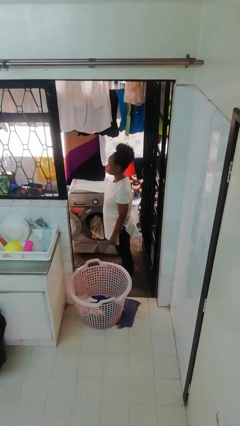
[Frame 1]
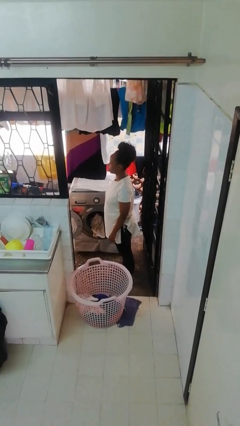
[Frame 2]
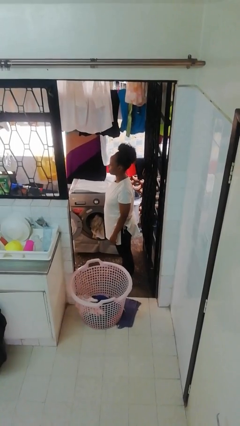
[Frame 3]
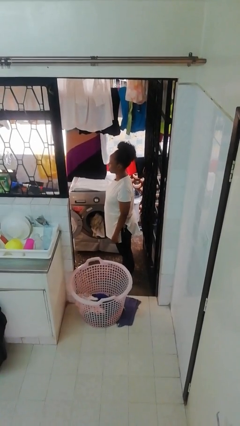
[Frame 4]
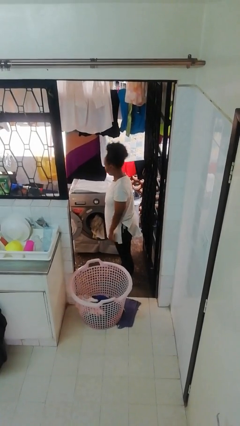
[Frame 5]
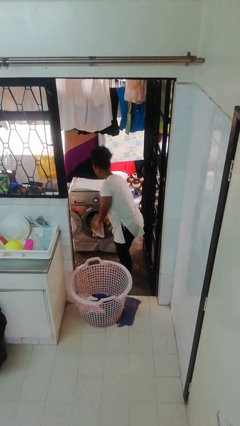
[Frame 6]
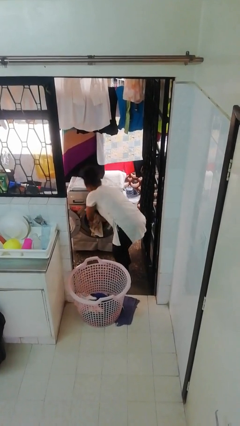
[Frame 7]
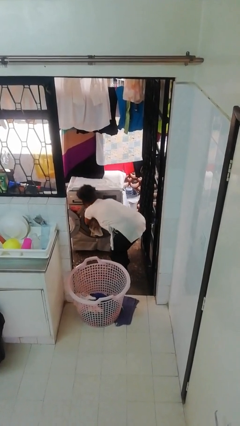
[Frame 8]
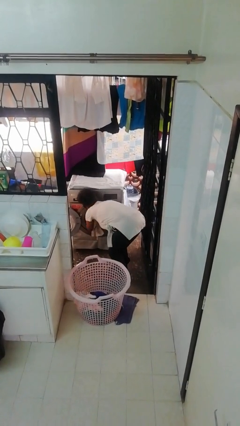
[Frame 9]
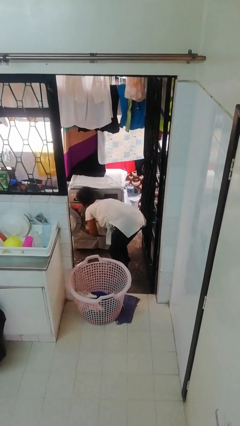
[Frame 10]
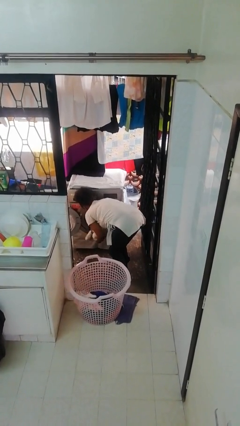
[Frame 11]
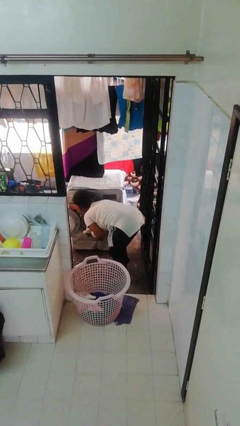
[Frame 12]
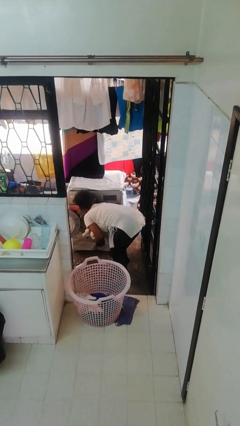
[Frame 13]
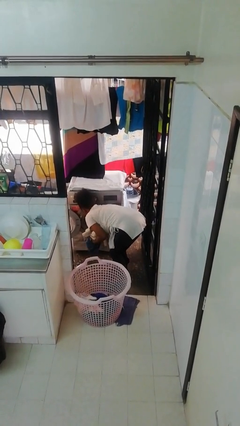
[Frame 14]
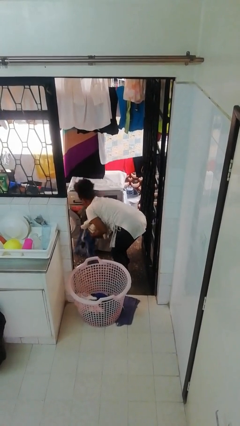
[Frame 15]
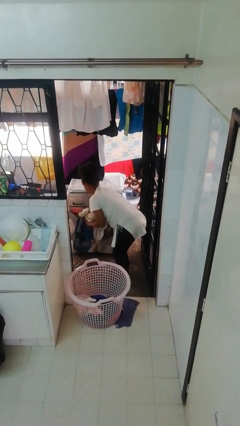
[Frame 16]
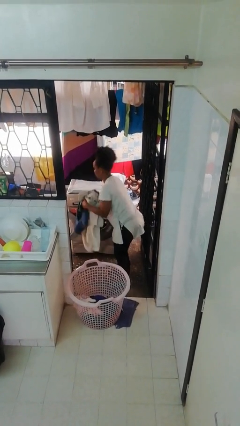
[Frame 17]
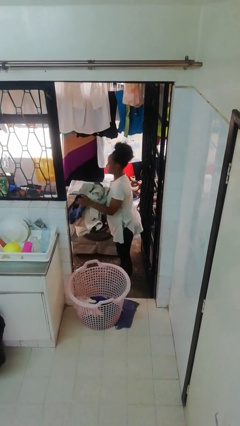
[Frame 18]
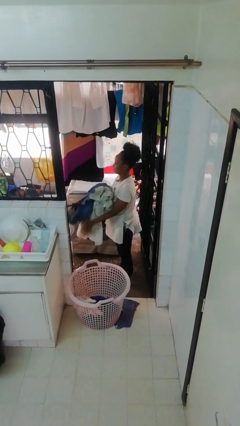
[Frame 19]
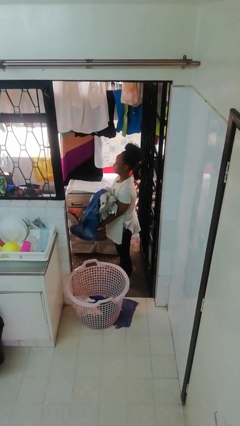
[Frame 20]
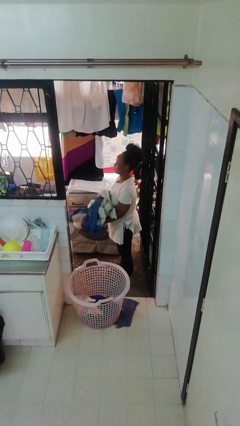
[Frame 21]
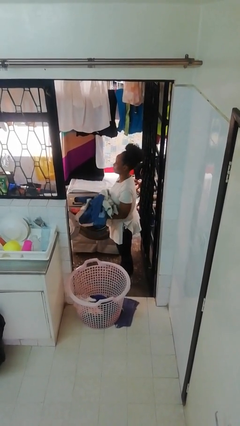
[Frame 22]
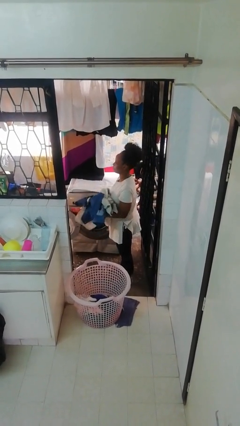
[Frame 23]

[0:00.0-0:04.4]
person unloads clotheswasher

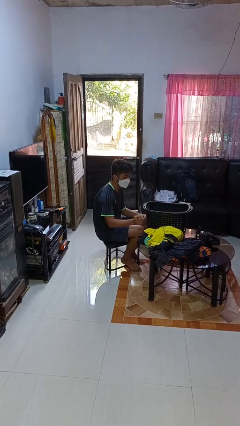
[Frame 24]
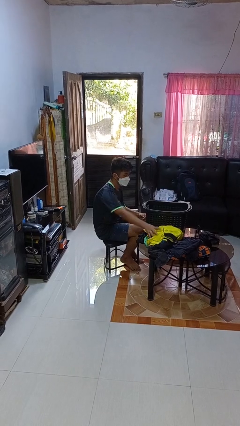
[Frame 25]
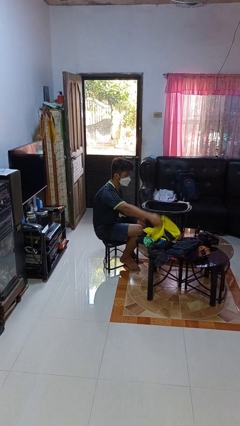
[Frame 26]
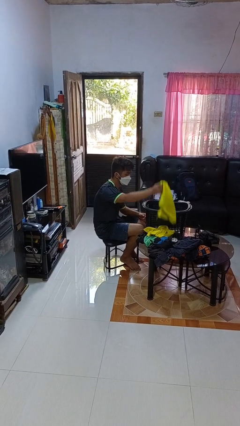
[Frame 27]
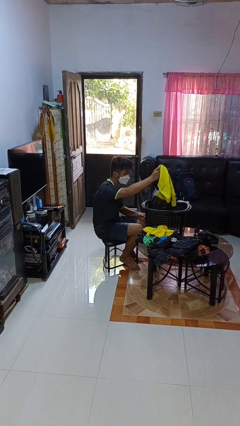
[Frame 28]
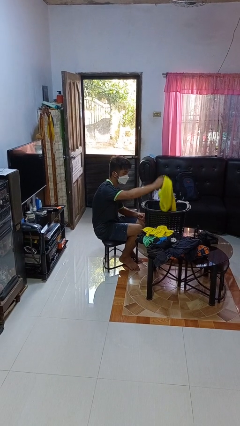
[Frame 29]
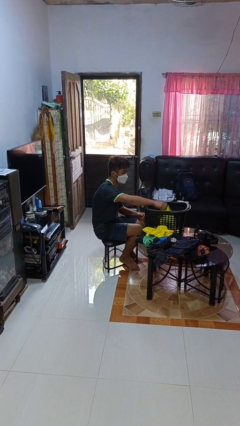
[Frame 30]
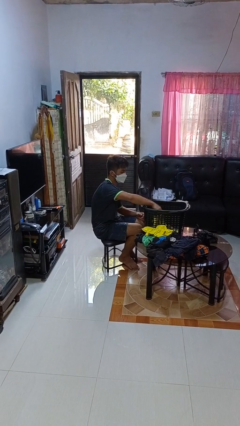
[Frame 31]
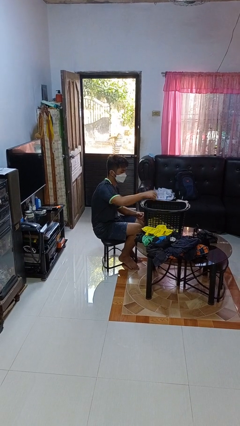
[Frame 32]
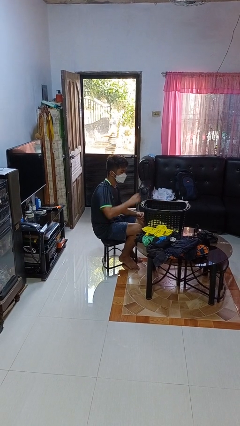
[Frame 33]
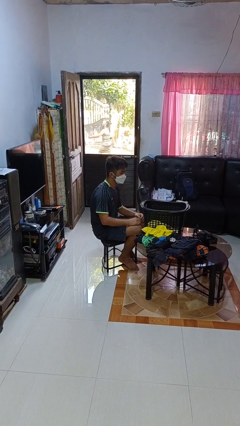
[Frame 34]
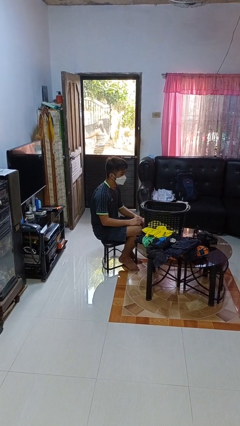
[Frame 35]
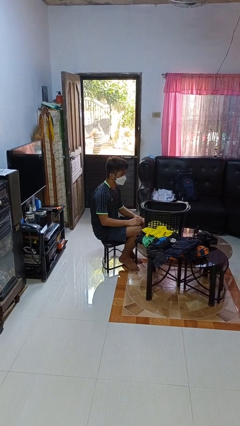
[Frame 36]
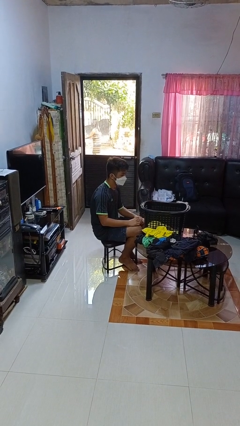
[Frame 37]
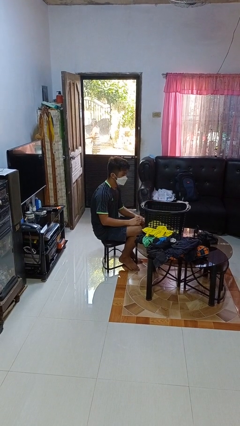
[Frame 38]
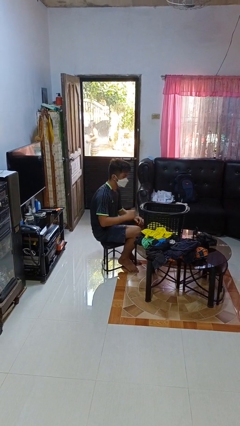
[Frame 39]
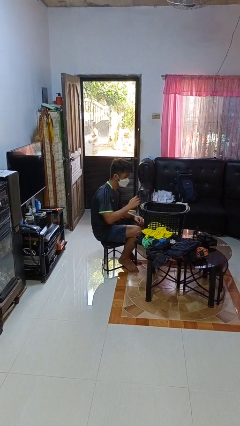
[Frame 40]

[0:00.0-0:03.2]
person puts object into basket

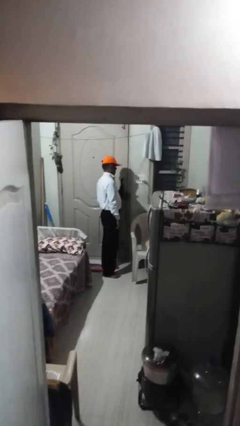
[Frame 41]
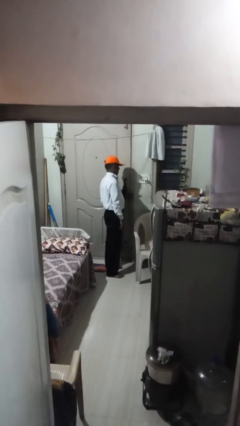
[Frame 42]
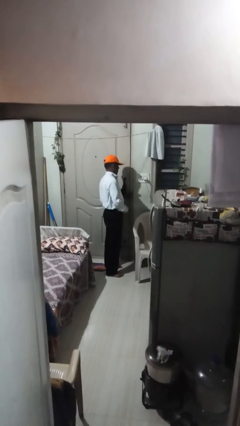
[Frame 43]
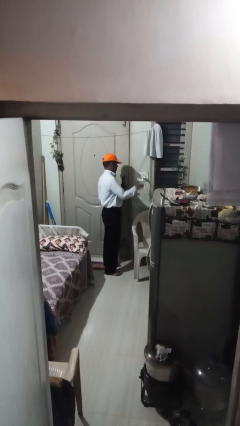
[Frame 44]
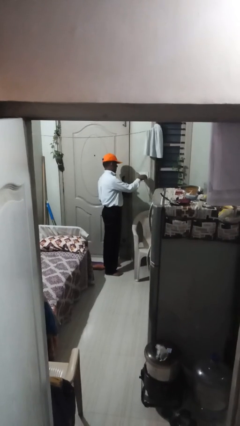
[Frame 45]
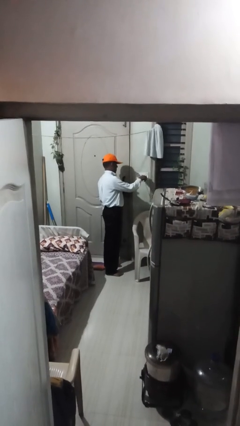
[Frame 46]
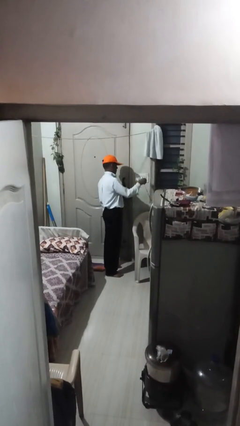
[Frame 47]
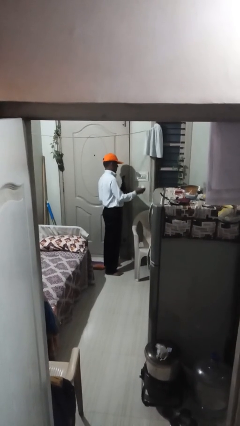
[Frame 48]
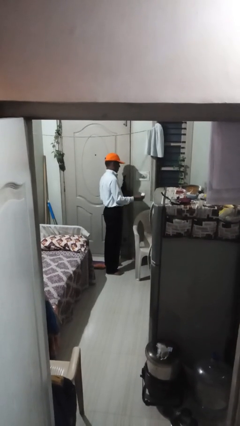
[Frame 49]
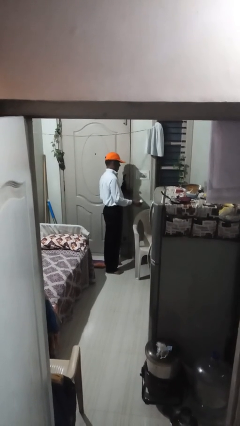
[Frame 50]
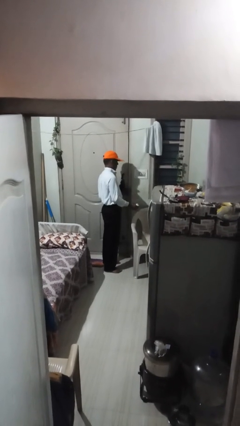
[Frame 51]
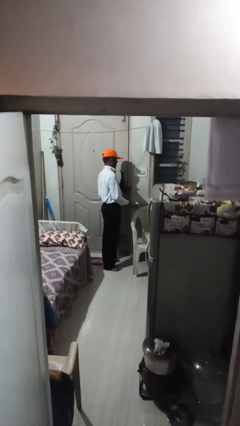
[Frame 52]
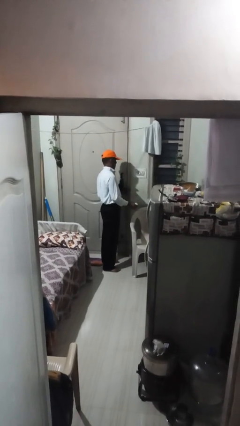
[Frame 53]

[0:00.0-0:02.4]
person unplugs from electrical socket

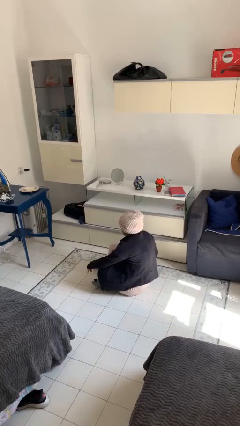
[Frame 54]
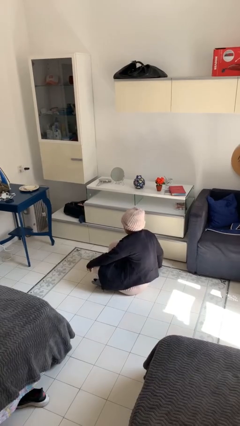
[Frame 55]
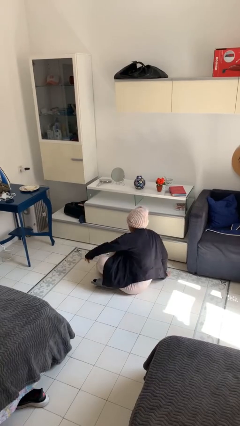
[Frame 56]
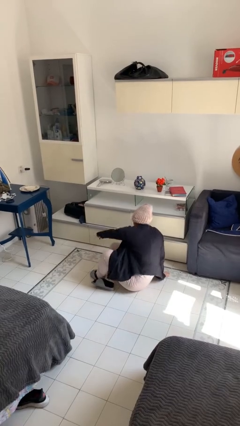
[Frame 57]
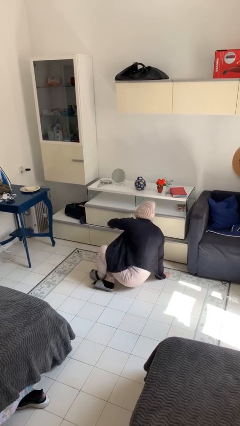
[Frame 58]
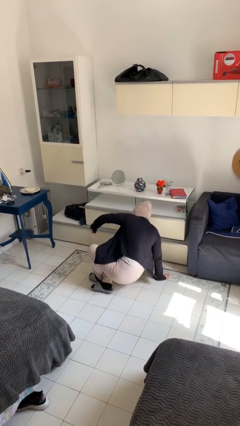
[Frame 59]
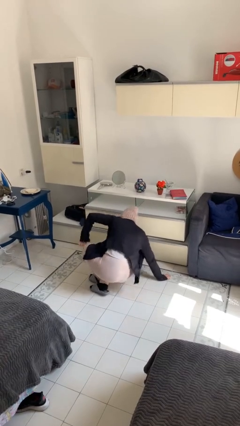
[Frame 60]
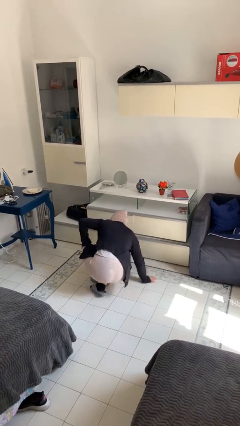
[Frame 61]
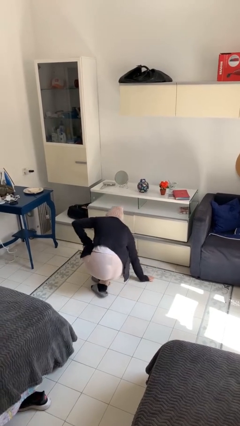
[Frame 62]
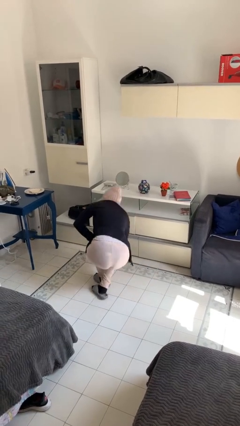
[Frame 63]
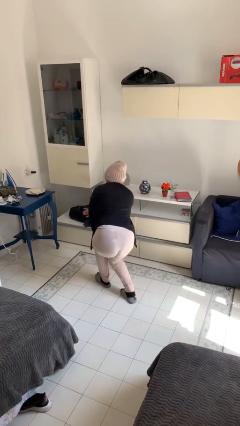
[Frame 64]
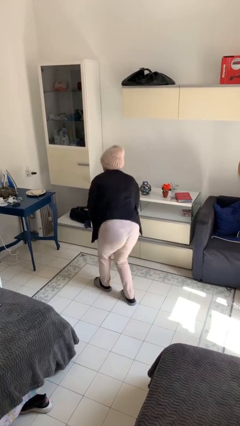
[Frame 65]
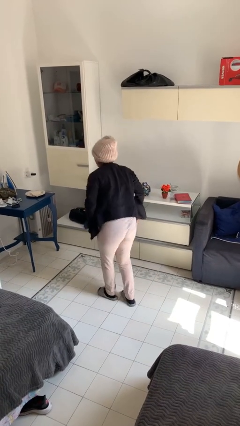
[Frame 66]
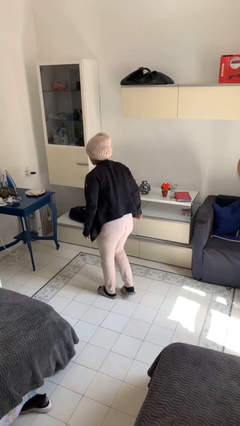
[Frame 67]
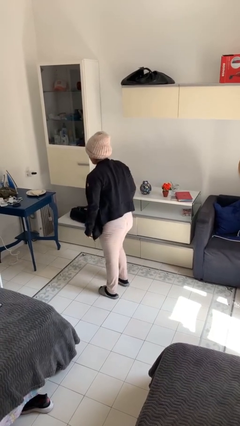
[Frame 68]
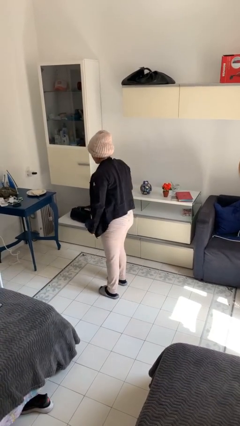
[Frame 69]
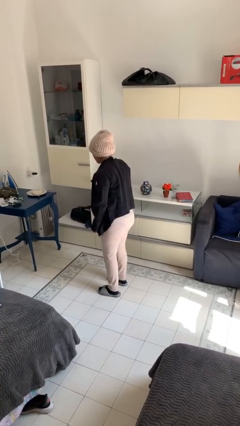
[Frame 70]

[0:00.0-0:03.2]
person stands up from floor

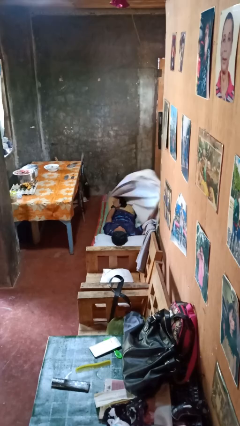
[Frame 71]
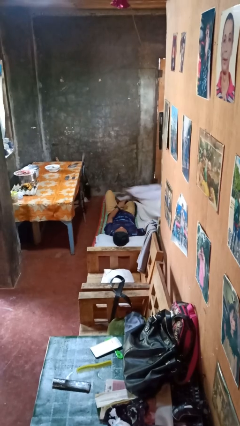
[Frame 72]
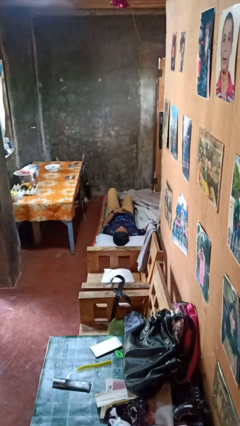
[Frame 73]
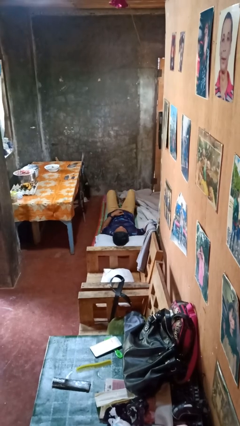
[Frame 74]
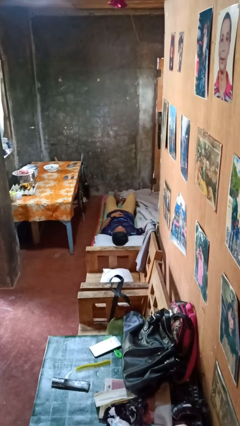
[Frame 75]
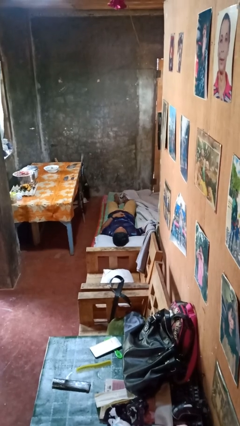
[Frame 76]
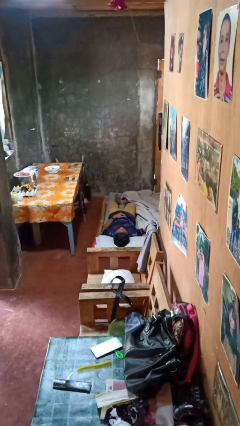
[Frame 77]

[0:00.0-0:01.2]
person uncovers with bedsheets

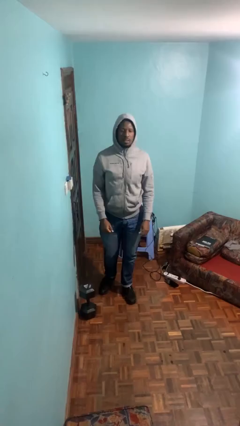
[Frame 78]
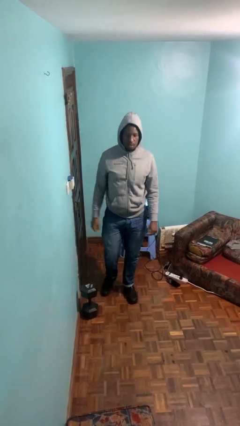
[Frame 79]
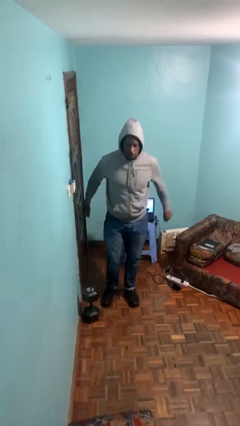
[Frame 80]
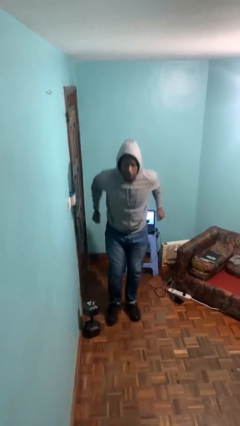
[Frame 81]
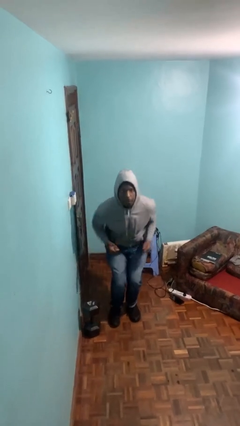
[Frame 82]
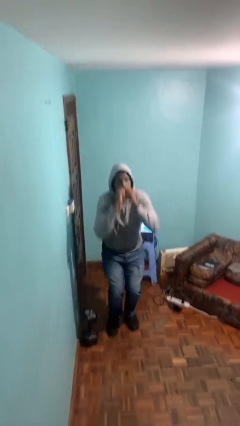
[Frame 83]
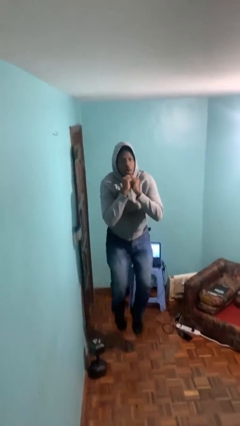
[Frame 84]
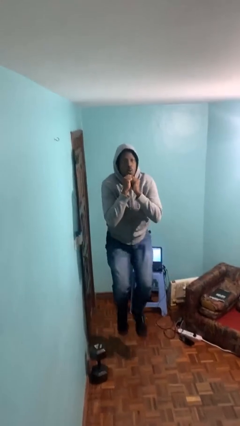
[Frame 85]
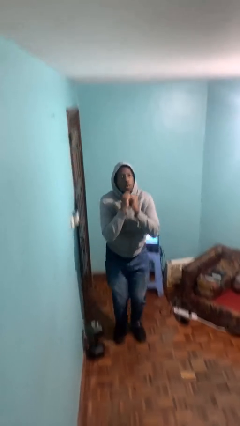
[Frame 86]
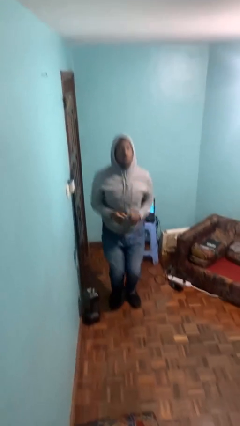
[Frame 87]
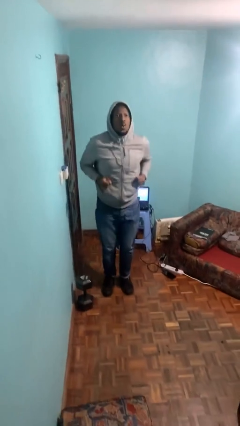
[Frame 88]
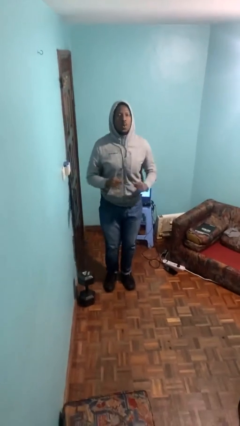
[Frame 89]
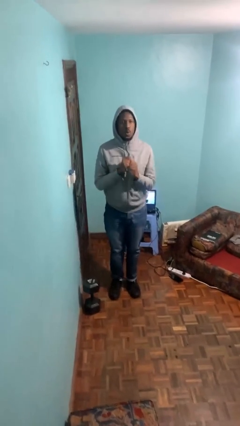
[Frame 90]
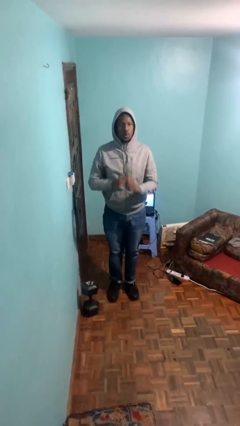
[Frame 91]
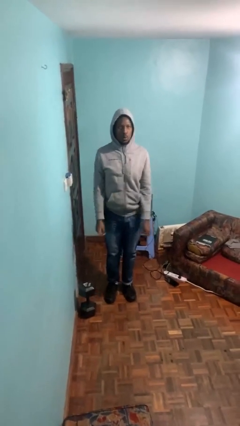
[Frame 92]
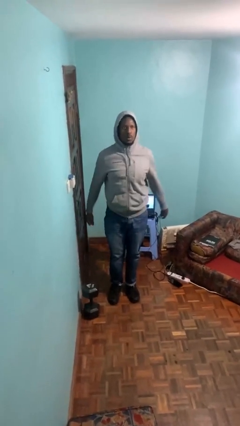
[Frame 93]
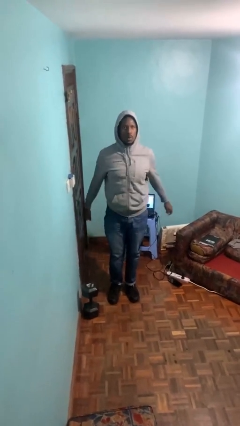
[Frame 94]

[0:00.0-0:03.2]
person jumps

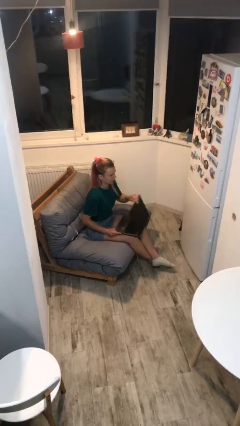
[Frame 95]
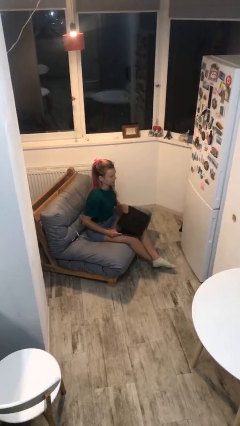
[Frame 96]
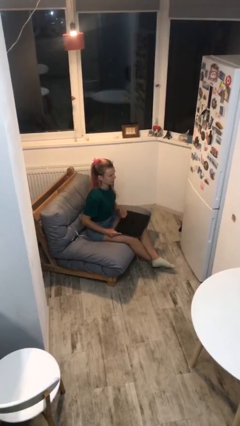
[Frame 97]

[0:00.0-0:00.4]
person closes laptop
